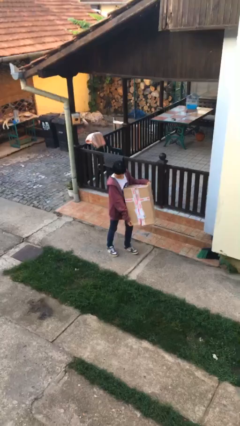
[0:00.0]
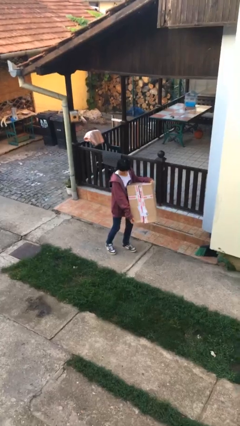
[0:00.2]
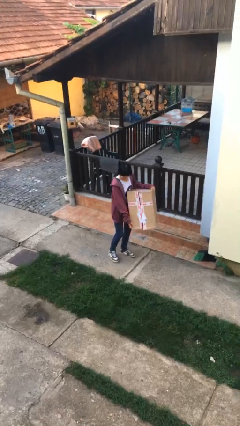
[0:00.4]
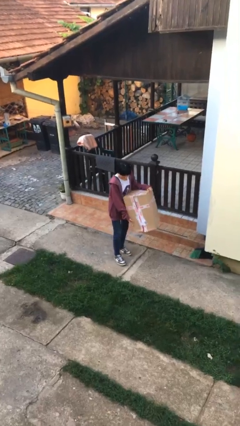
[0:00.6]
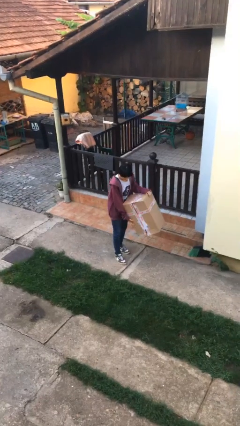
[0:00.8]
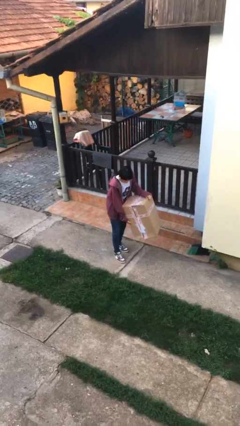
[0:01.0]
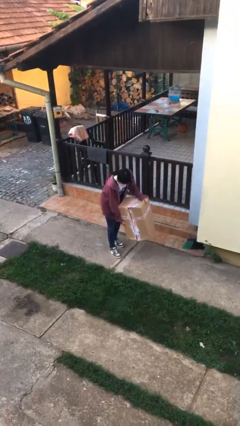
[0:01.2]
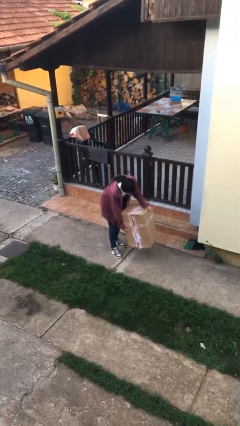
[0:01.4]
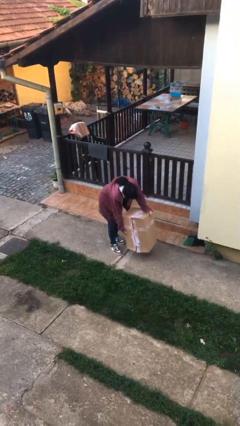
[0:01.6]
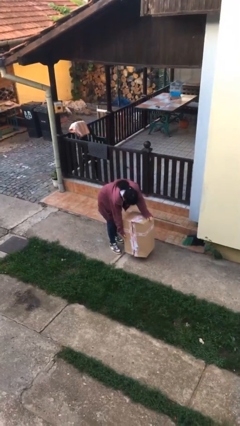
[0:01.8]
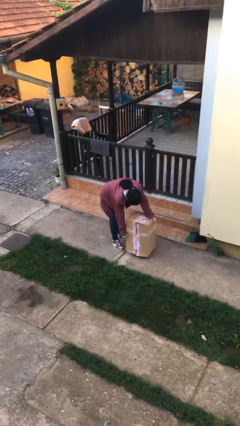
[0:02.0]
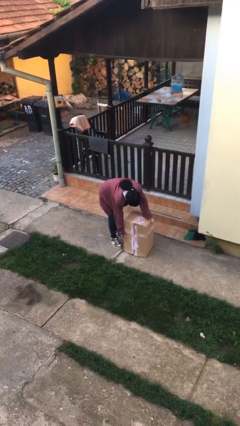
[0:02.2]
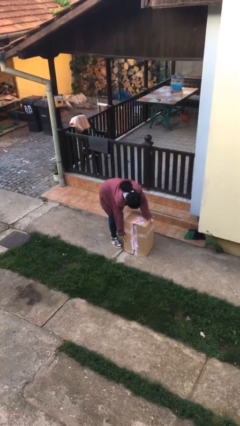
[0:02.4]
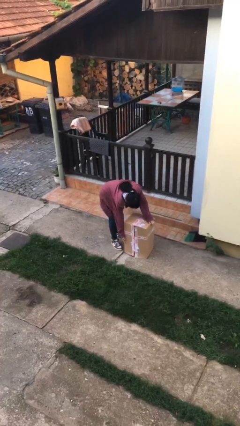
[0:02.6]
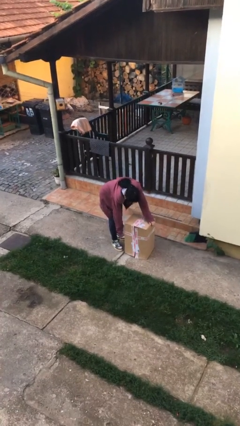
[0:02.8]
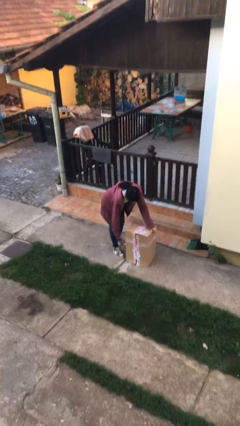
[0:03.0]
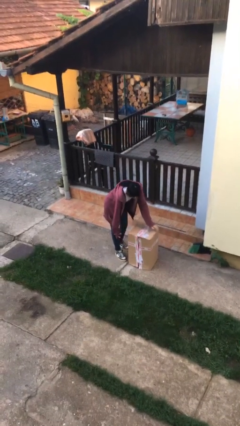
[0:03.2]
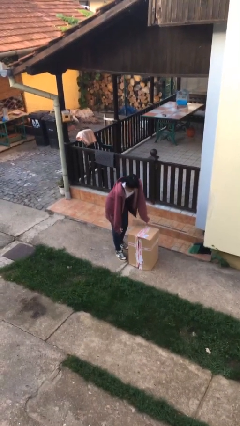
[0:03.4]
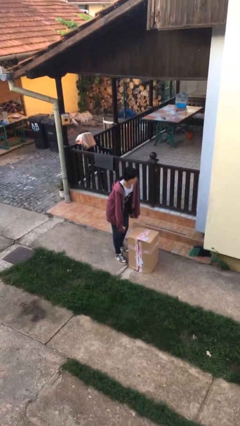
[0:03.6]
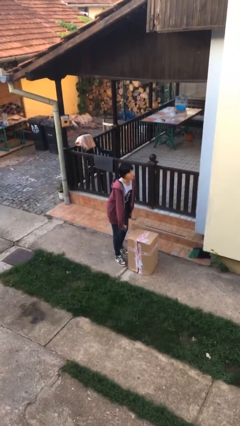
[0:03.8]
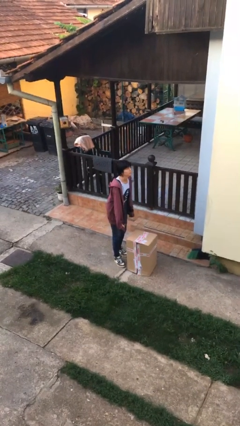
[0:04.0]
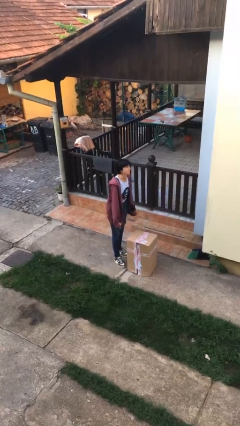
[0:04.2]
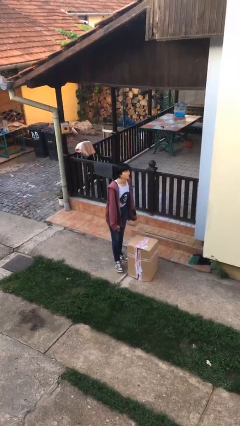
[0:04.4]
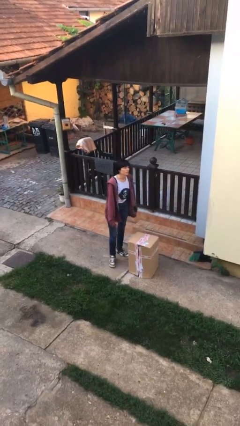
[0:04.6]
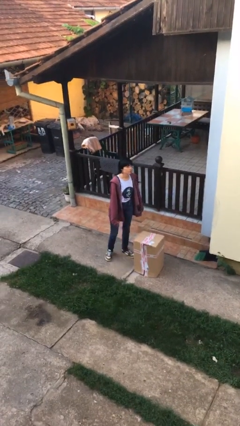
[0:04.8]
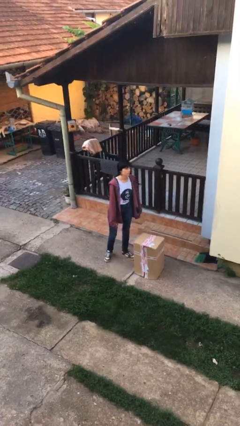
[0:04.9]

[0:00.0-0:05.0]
person puts down object on floor

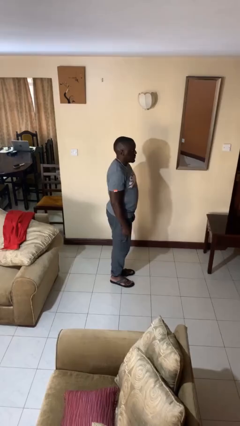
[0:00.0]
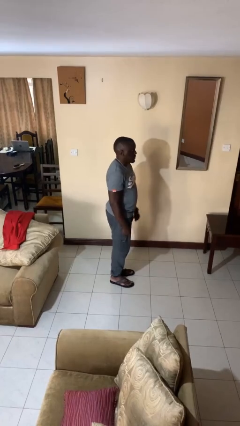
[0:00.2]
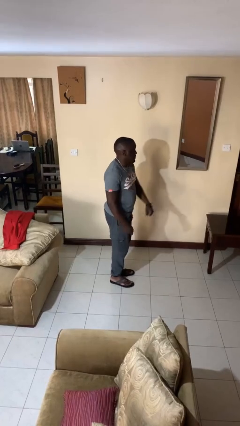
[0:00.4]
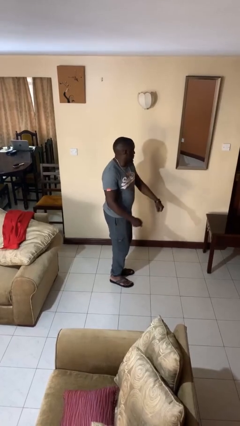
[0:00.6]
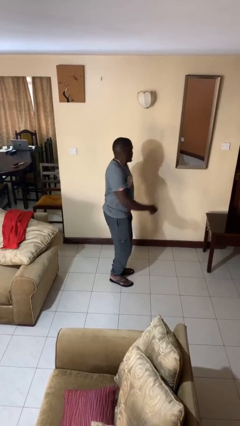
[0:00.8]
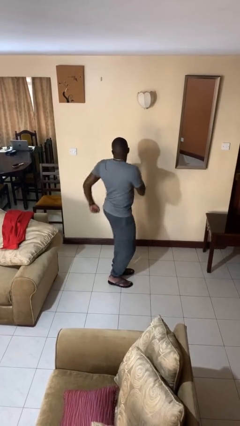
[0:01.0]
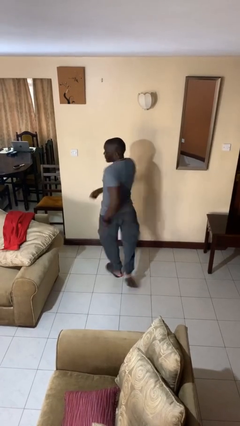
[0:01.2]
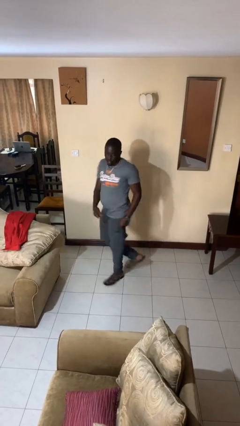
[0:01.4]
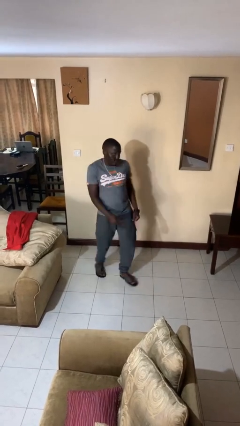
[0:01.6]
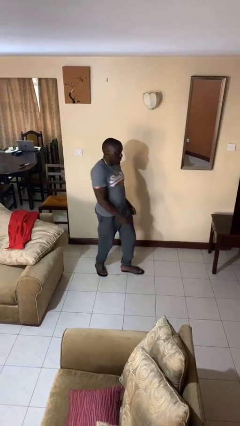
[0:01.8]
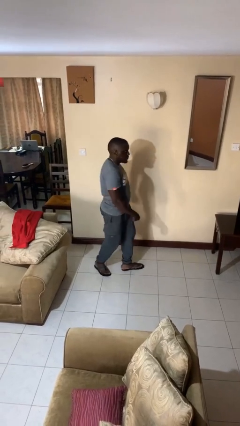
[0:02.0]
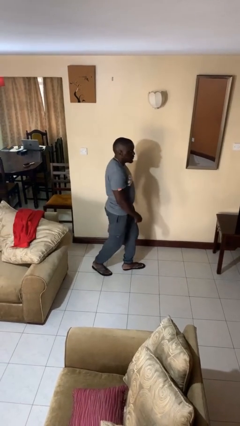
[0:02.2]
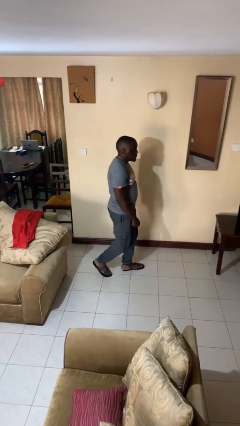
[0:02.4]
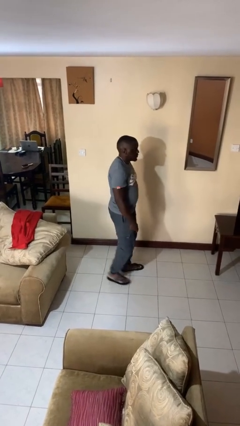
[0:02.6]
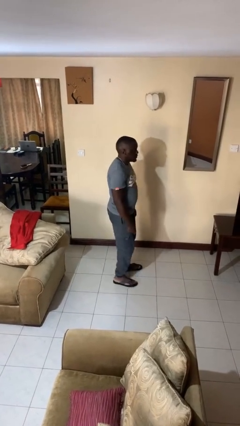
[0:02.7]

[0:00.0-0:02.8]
person twirls

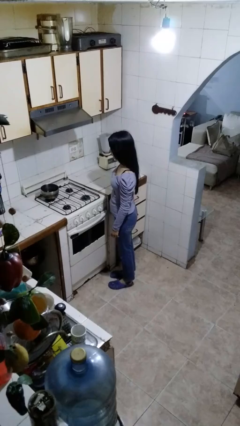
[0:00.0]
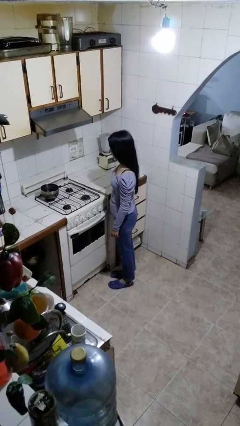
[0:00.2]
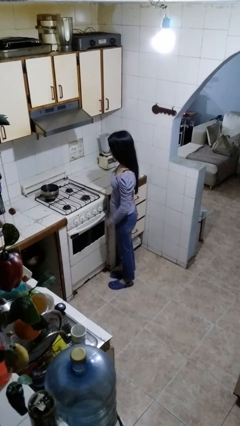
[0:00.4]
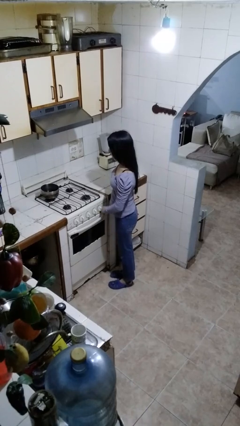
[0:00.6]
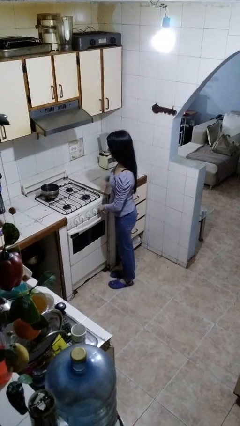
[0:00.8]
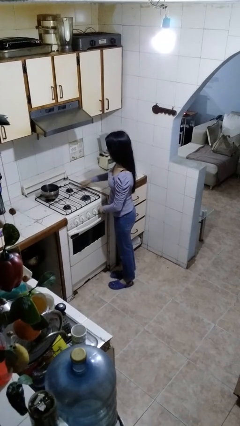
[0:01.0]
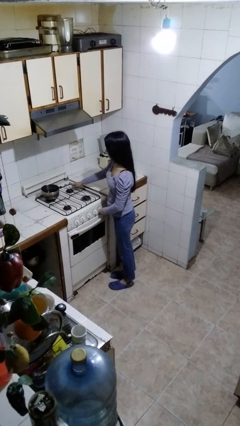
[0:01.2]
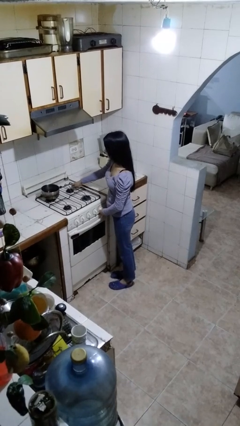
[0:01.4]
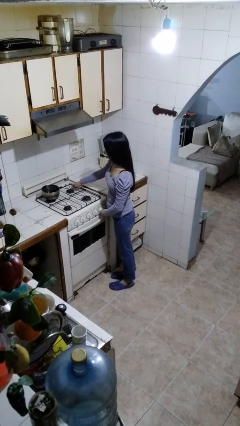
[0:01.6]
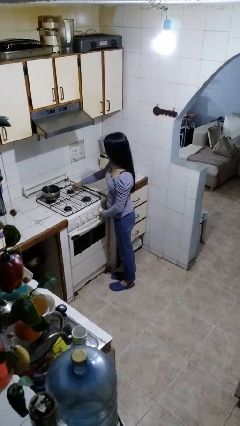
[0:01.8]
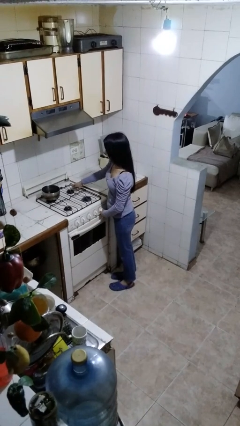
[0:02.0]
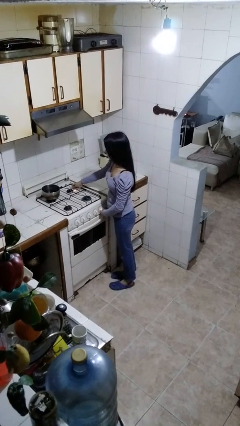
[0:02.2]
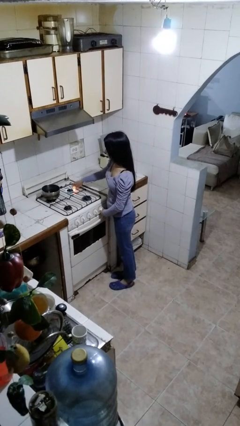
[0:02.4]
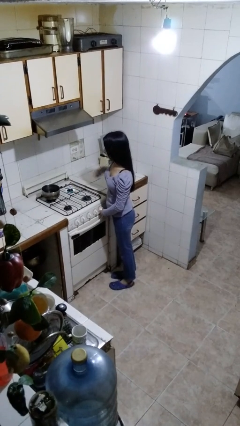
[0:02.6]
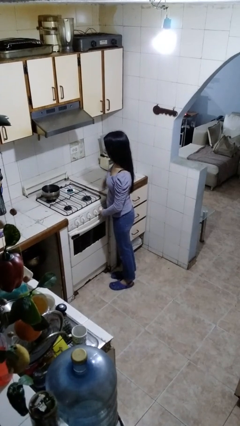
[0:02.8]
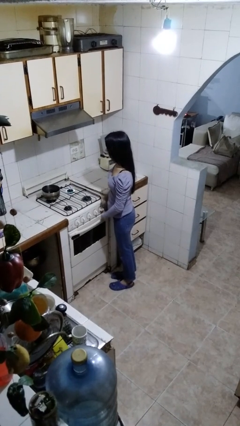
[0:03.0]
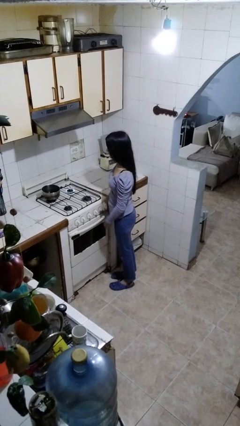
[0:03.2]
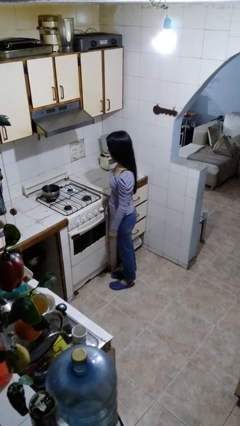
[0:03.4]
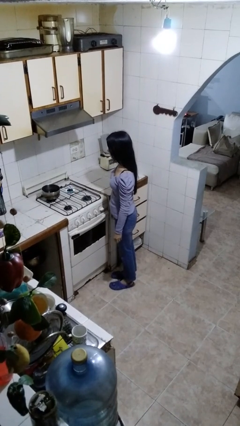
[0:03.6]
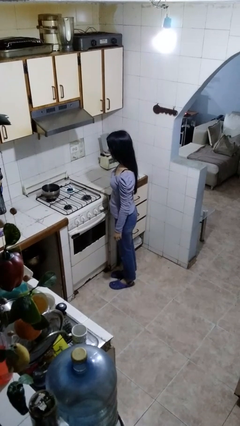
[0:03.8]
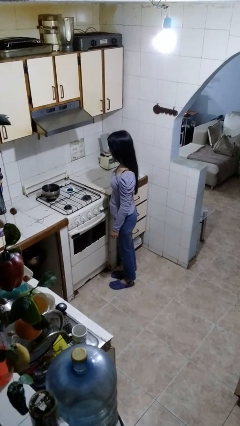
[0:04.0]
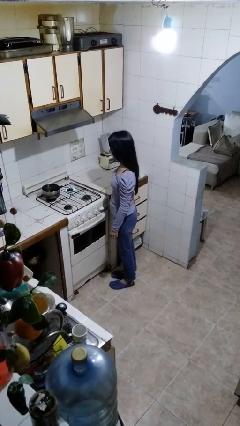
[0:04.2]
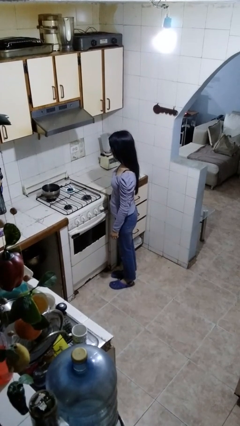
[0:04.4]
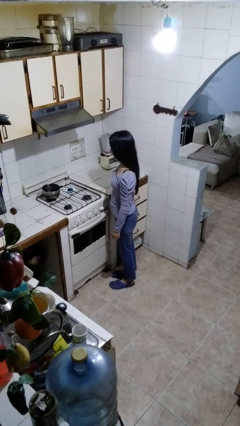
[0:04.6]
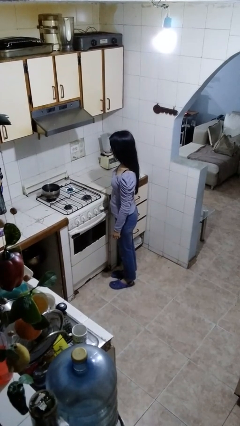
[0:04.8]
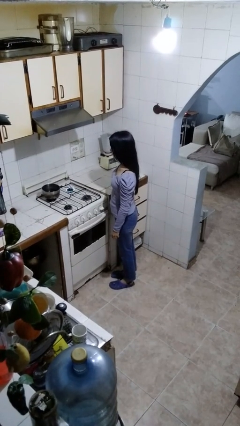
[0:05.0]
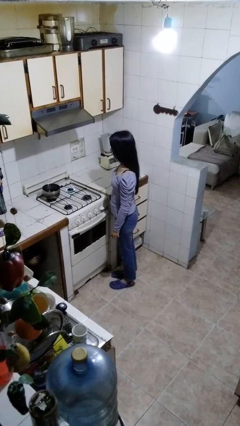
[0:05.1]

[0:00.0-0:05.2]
person turns on stovetop

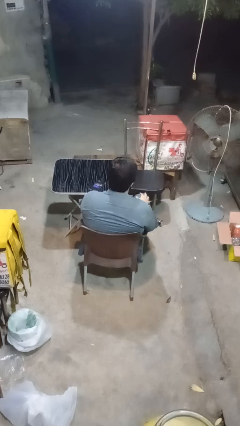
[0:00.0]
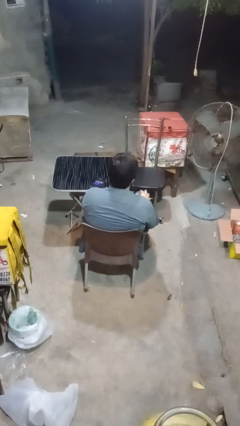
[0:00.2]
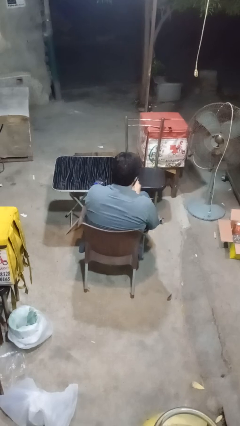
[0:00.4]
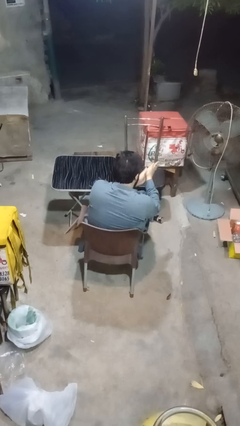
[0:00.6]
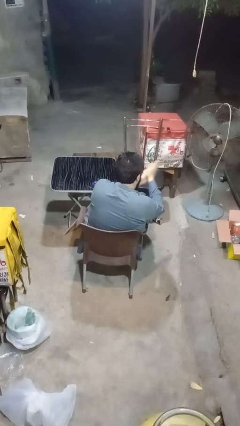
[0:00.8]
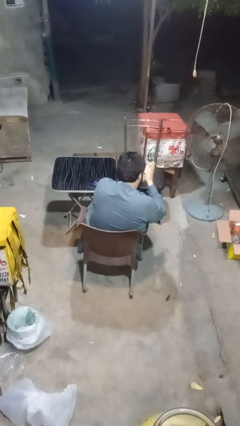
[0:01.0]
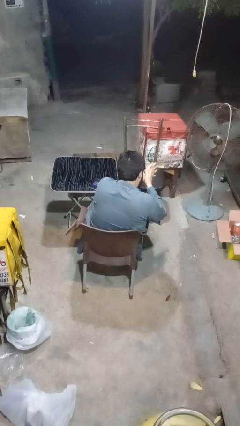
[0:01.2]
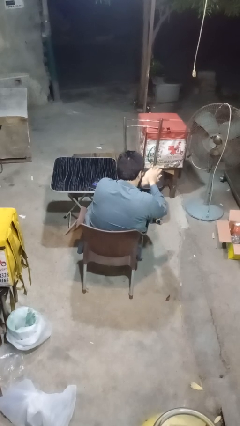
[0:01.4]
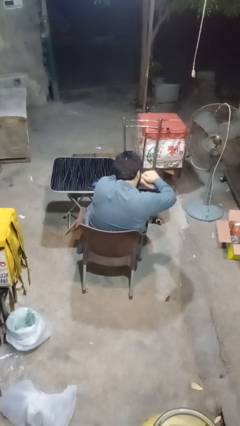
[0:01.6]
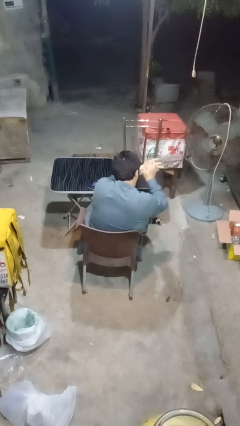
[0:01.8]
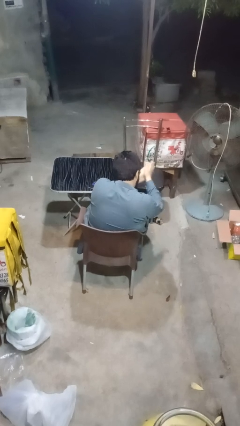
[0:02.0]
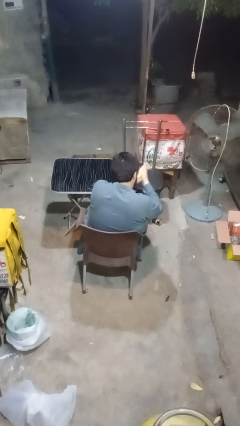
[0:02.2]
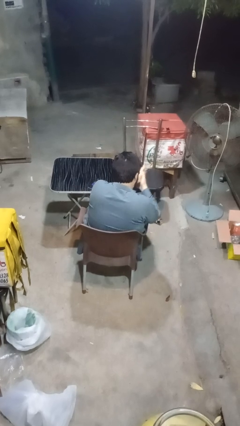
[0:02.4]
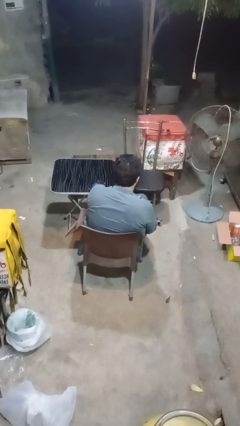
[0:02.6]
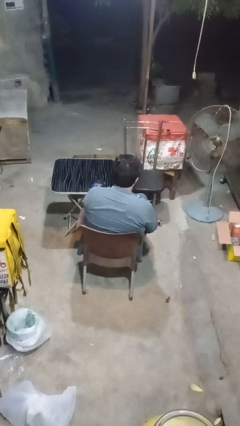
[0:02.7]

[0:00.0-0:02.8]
person blows into hands

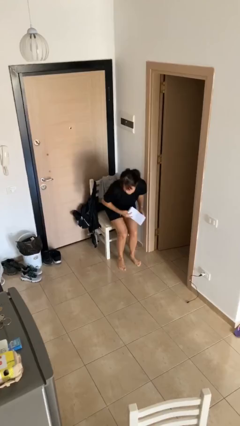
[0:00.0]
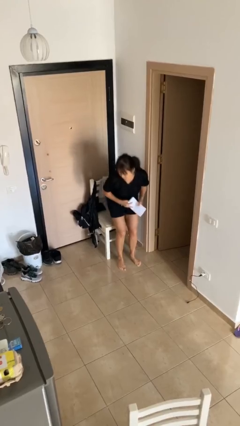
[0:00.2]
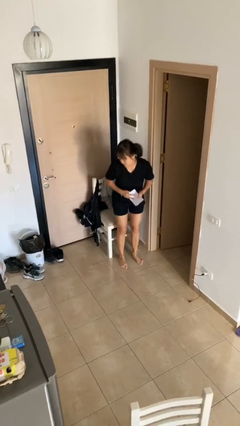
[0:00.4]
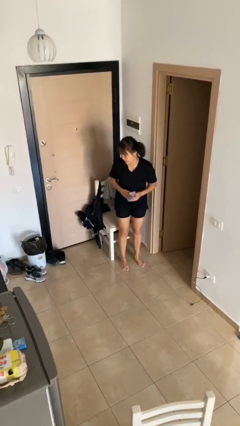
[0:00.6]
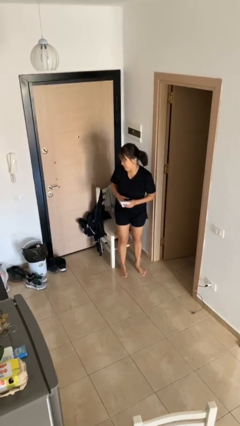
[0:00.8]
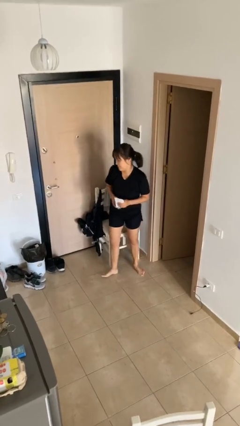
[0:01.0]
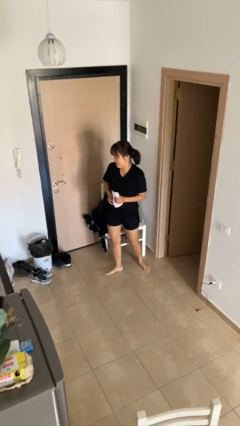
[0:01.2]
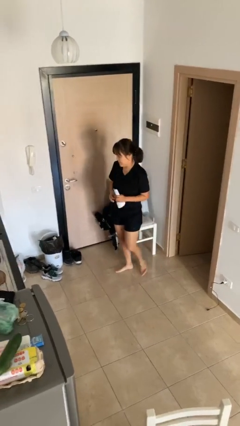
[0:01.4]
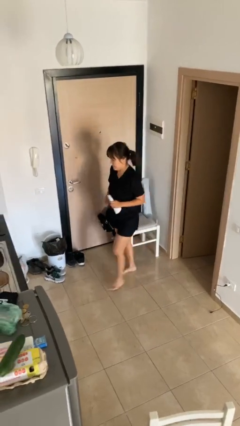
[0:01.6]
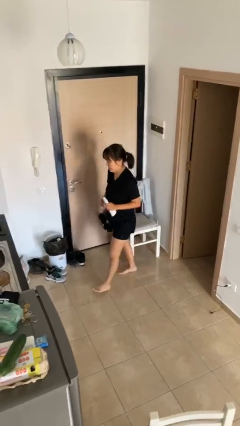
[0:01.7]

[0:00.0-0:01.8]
person stands up
